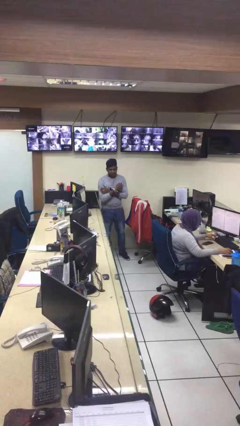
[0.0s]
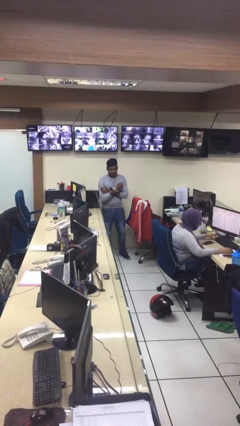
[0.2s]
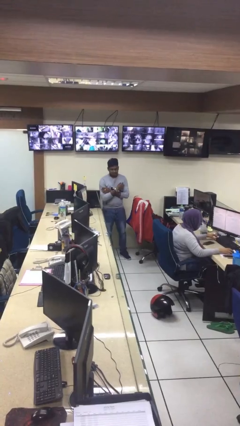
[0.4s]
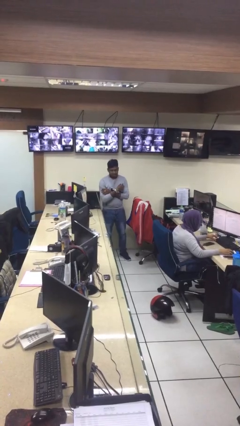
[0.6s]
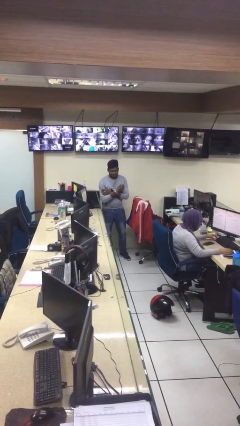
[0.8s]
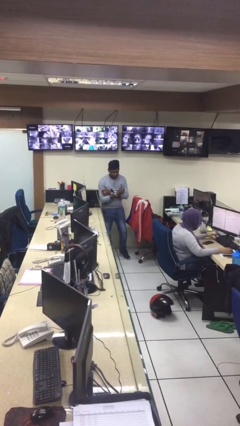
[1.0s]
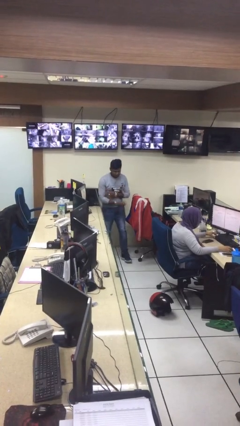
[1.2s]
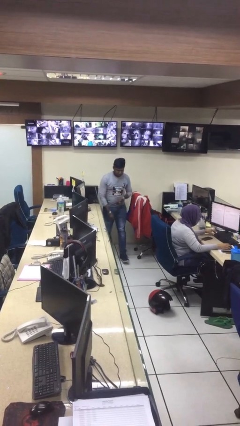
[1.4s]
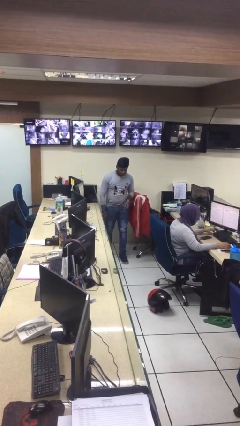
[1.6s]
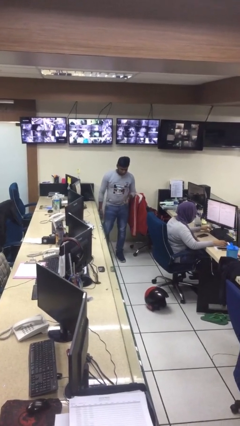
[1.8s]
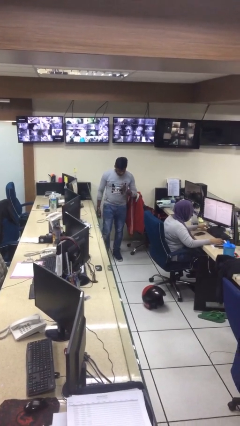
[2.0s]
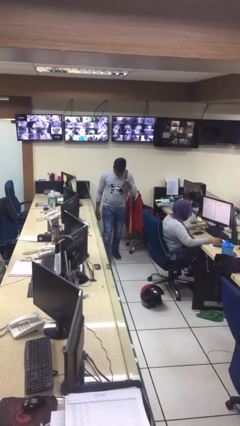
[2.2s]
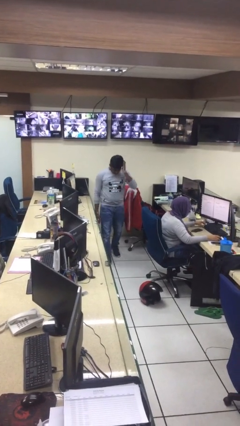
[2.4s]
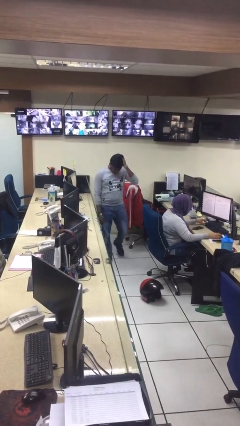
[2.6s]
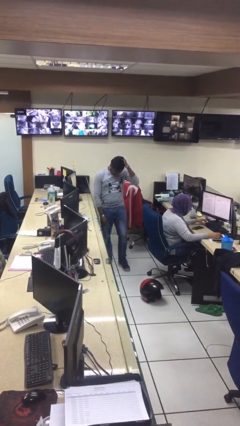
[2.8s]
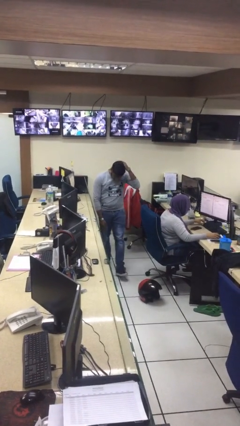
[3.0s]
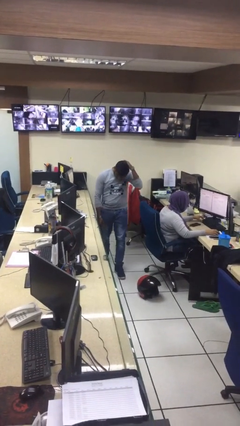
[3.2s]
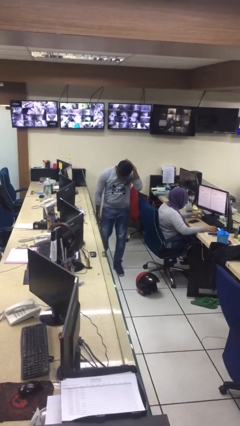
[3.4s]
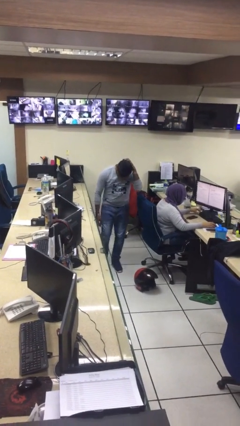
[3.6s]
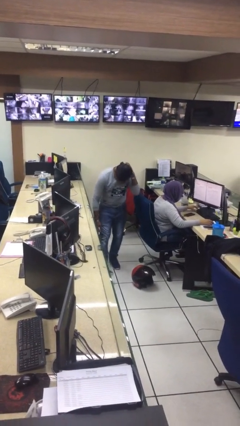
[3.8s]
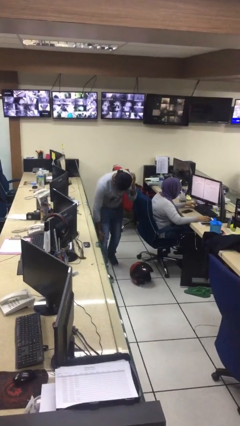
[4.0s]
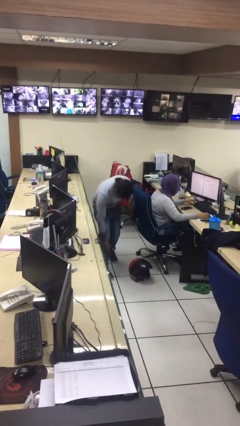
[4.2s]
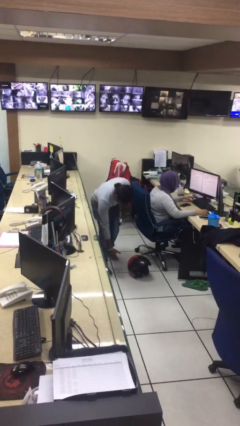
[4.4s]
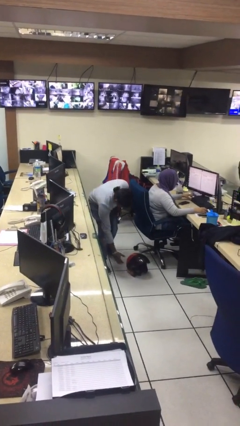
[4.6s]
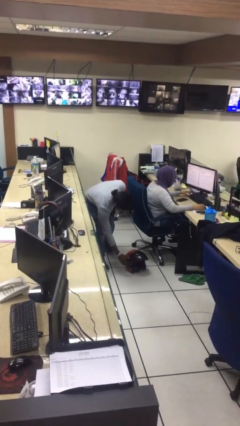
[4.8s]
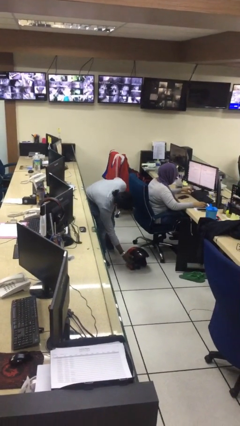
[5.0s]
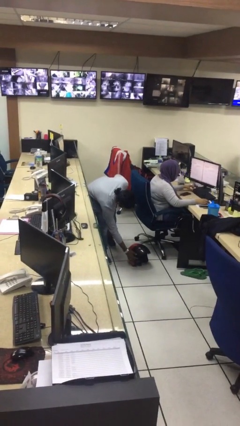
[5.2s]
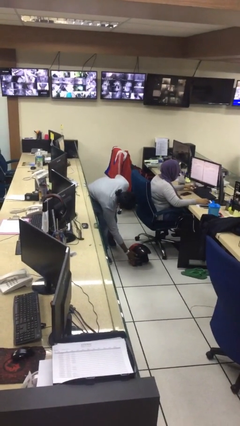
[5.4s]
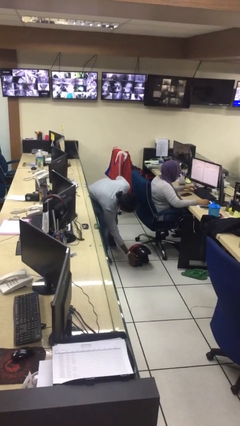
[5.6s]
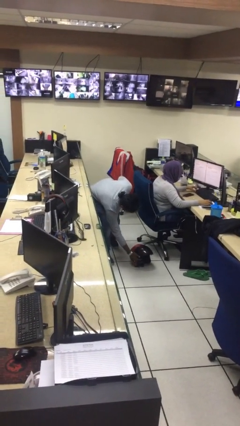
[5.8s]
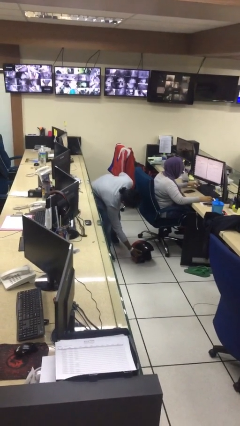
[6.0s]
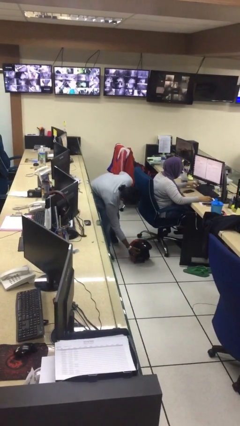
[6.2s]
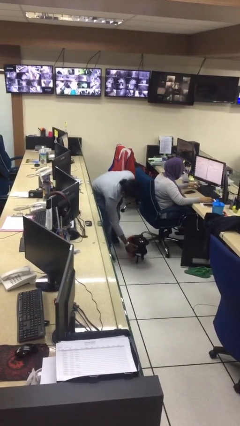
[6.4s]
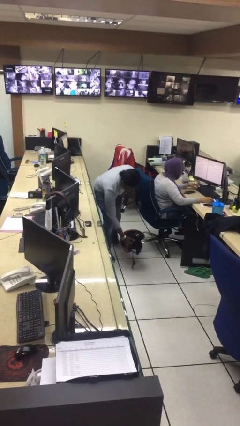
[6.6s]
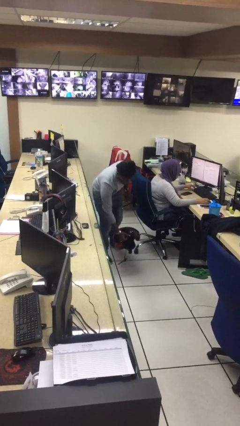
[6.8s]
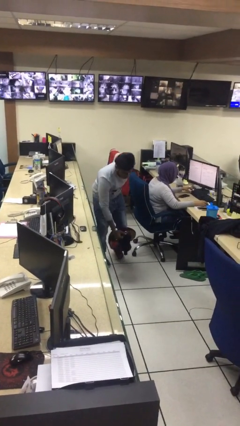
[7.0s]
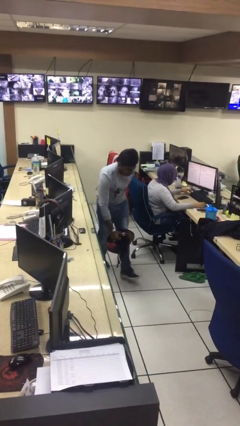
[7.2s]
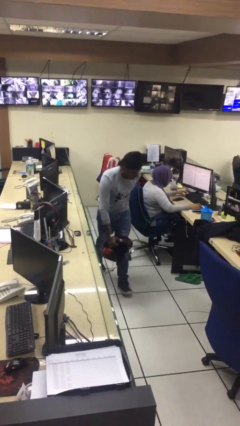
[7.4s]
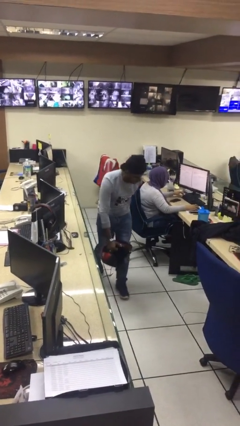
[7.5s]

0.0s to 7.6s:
person steals object from person

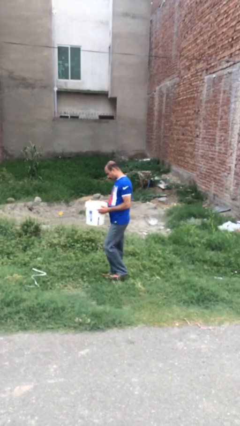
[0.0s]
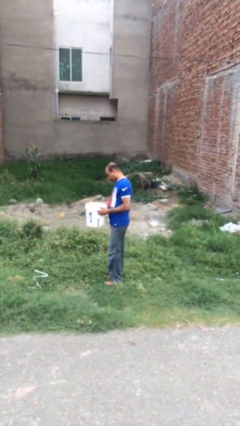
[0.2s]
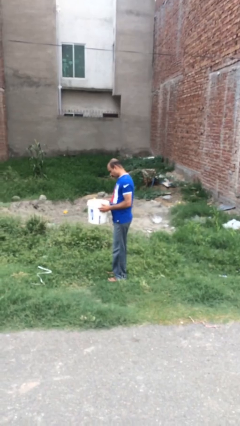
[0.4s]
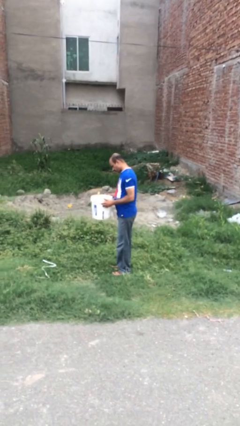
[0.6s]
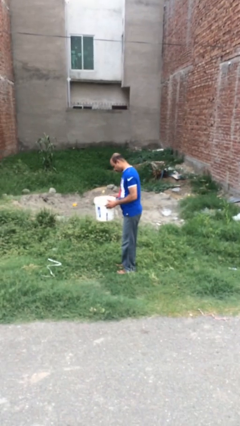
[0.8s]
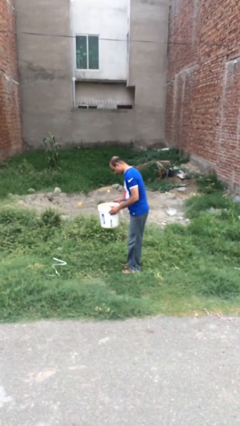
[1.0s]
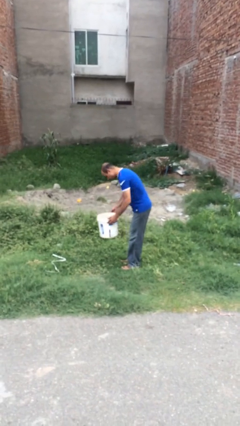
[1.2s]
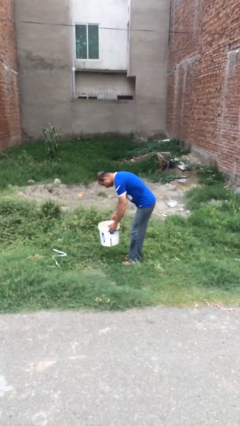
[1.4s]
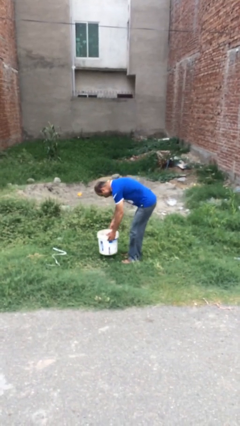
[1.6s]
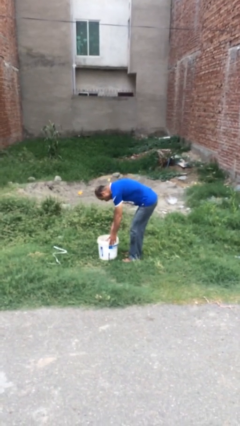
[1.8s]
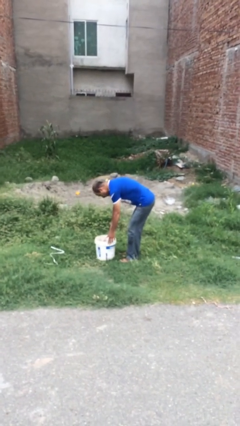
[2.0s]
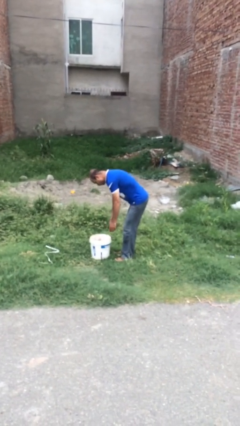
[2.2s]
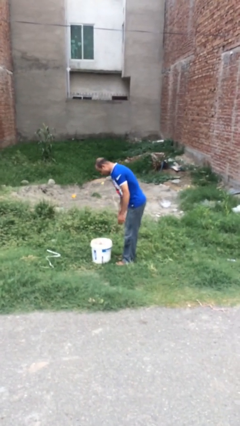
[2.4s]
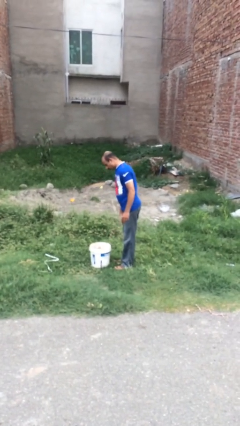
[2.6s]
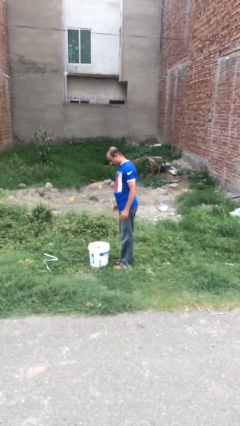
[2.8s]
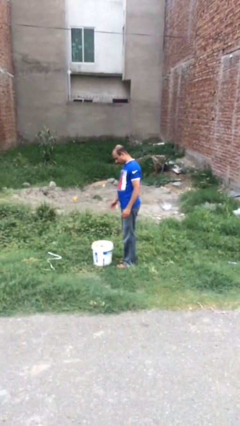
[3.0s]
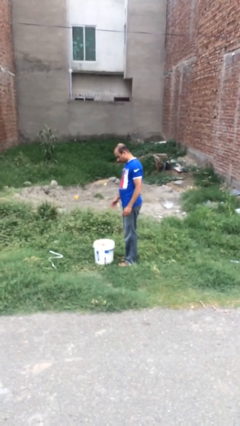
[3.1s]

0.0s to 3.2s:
person puts down object on floor

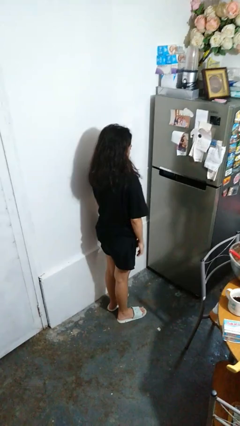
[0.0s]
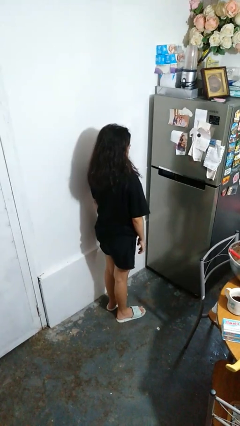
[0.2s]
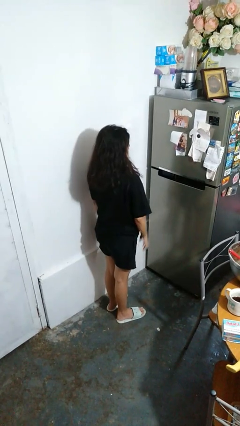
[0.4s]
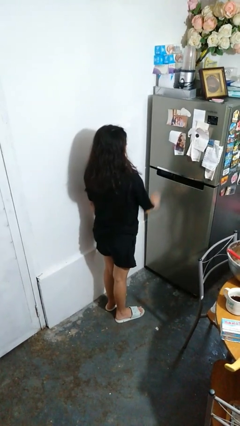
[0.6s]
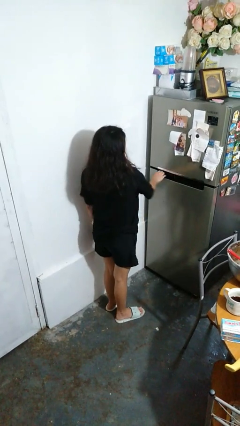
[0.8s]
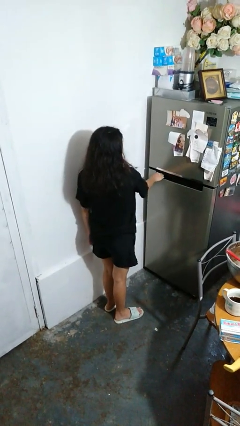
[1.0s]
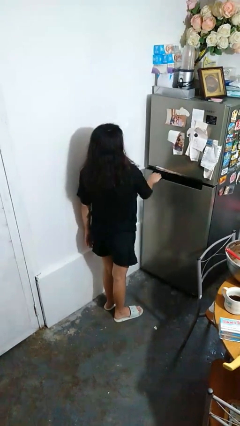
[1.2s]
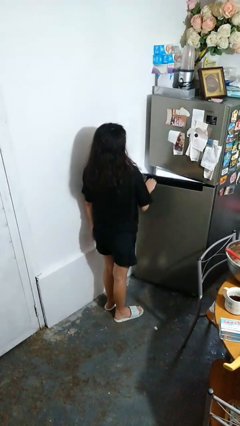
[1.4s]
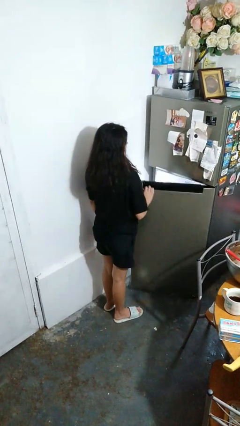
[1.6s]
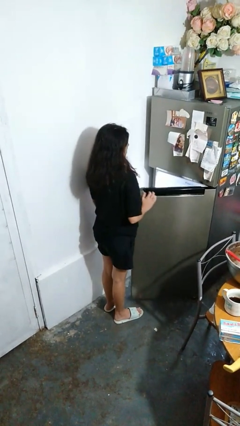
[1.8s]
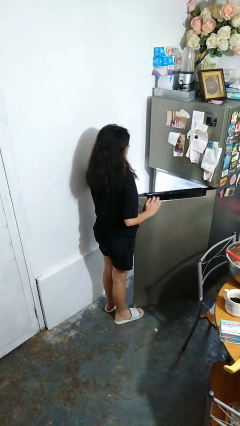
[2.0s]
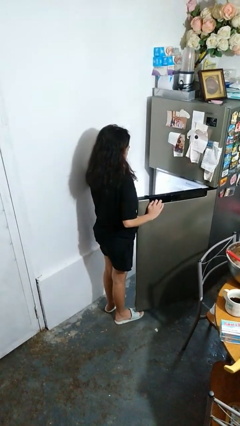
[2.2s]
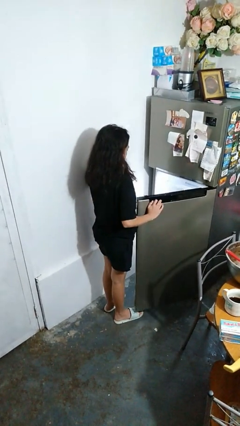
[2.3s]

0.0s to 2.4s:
person opens refrigerator

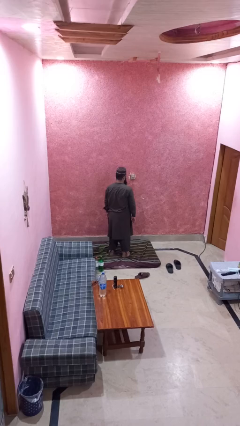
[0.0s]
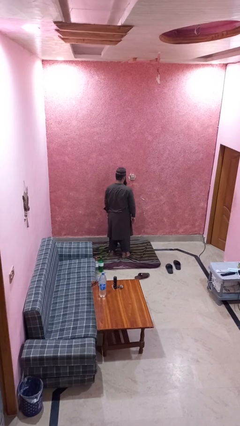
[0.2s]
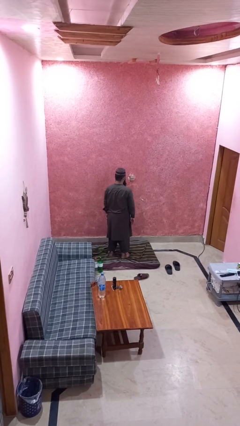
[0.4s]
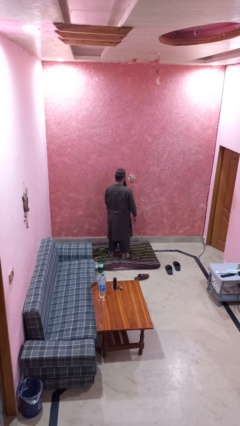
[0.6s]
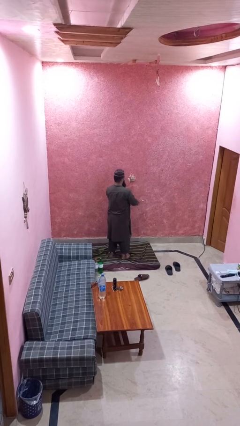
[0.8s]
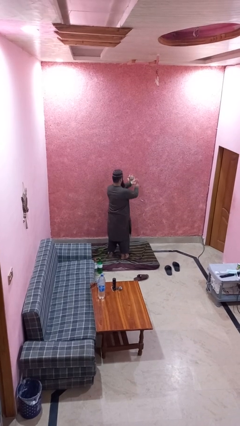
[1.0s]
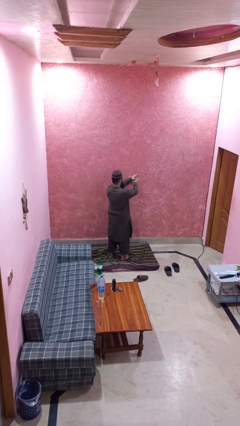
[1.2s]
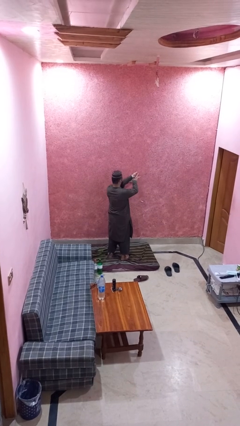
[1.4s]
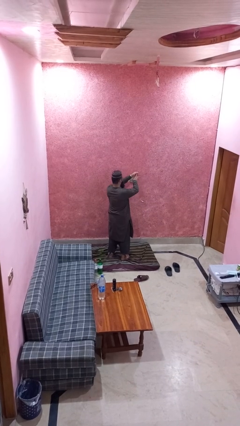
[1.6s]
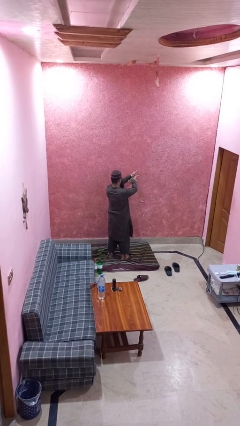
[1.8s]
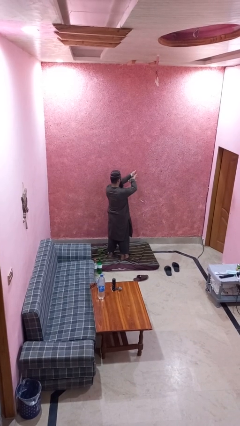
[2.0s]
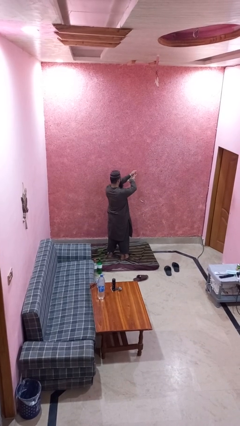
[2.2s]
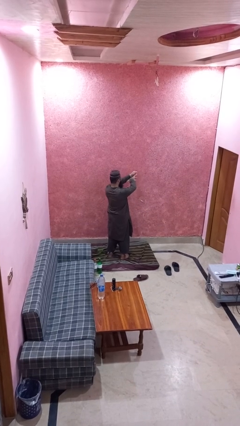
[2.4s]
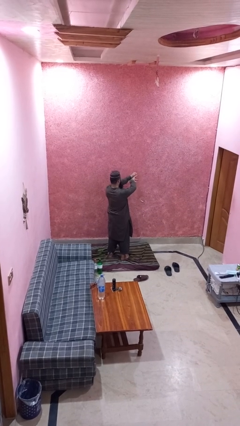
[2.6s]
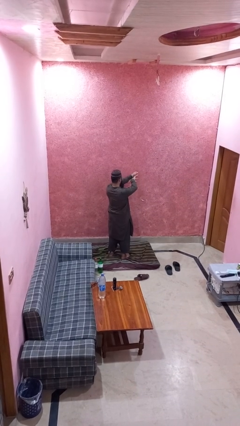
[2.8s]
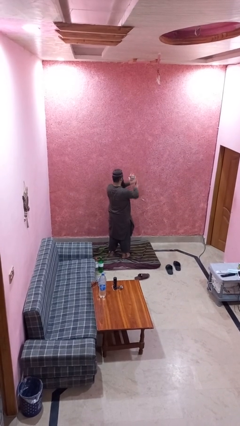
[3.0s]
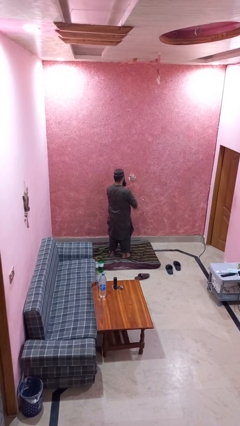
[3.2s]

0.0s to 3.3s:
person snaps fingers

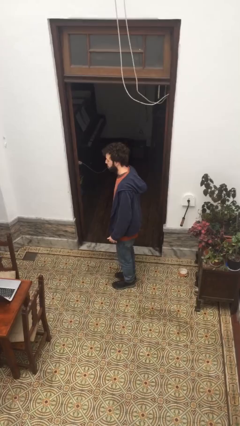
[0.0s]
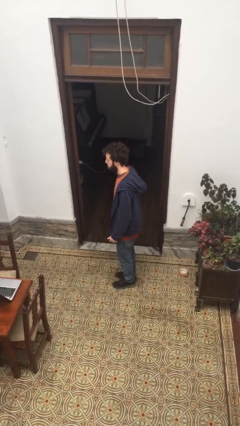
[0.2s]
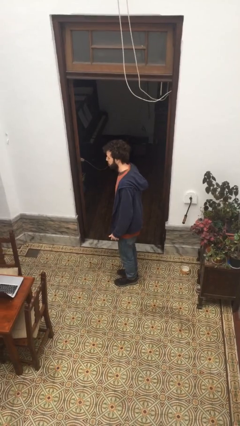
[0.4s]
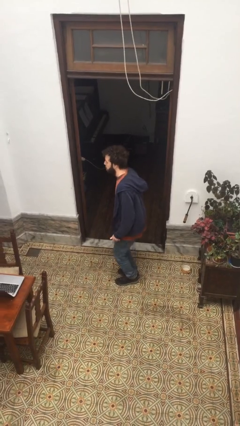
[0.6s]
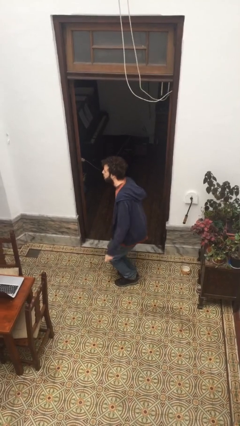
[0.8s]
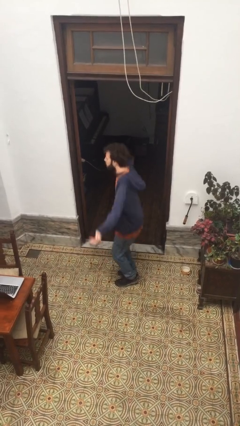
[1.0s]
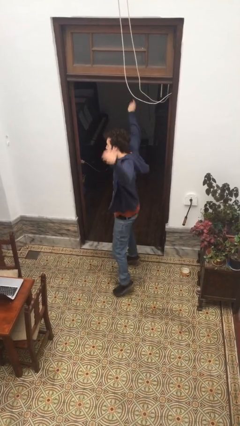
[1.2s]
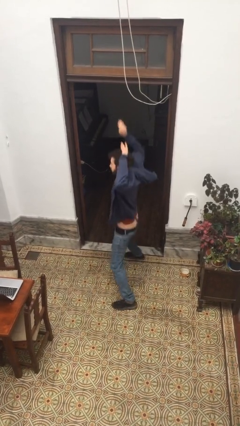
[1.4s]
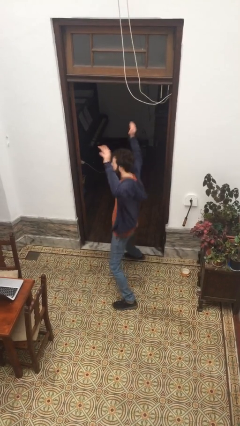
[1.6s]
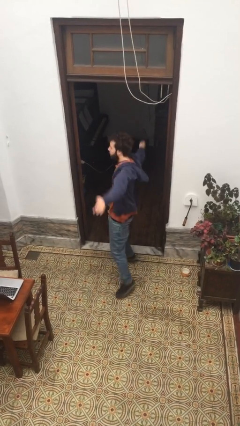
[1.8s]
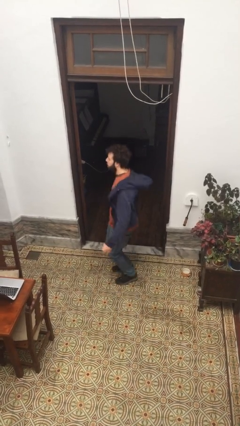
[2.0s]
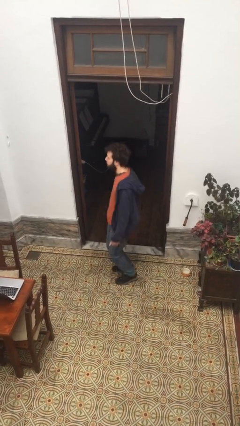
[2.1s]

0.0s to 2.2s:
person exercises with jumping jacks
